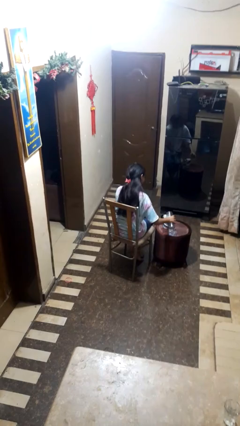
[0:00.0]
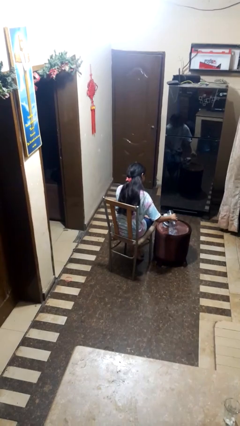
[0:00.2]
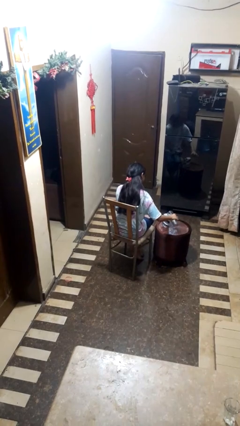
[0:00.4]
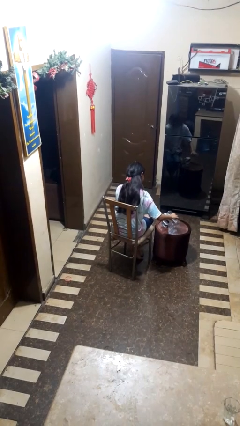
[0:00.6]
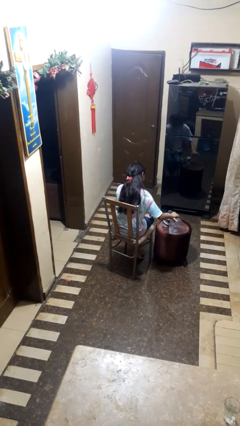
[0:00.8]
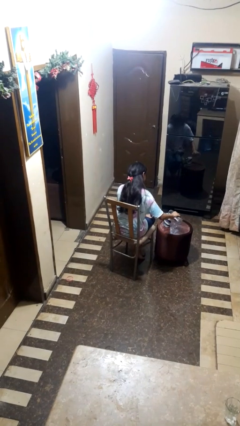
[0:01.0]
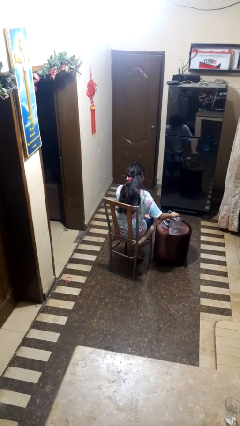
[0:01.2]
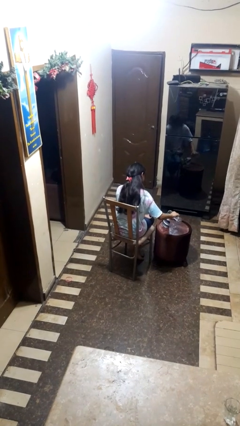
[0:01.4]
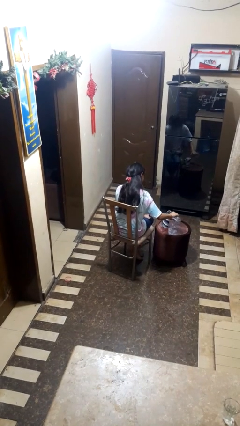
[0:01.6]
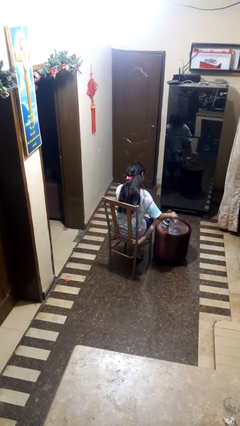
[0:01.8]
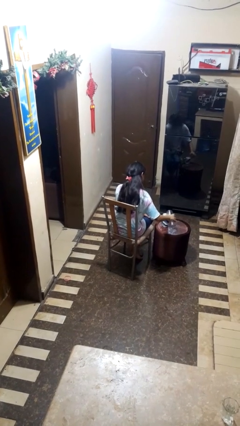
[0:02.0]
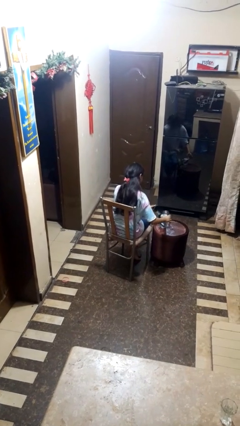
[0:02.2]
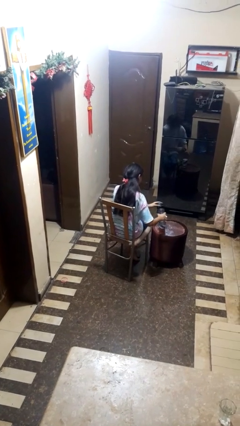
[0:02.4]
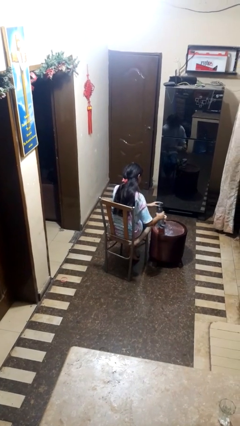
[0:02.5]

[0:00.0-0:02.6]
person pours liquid into cup

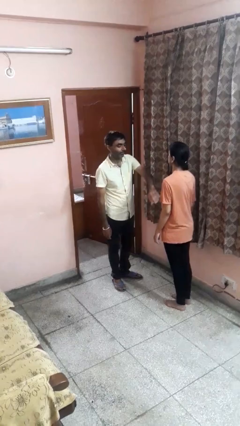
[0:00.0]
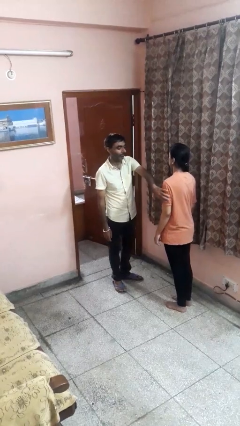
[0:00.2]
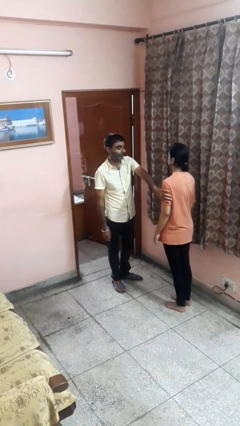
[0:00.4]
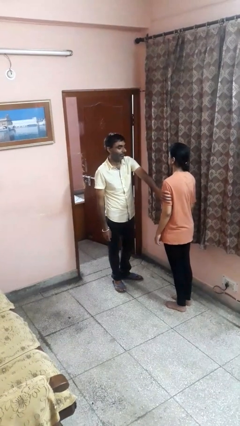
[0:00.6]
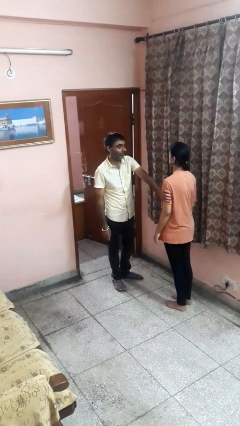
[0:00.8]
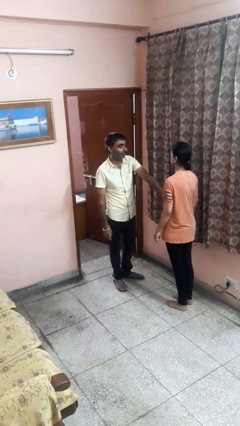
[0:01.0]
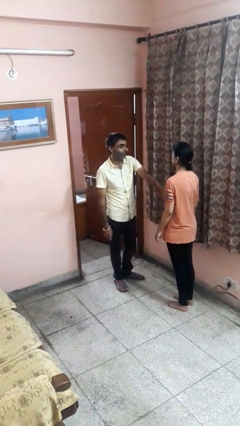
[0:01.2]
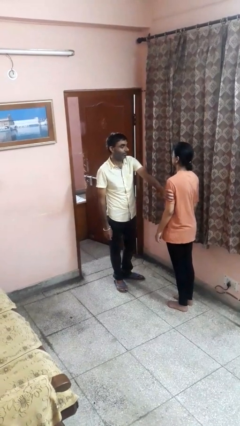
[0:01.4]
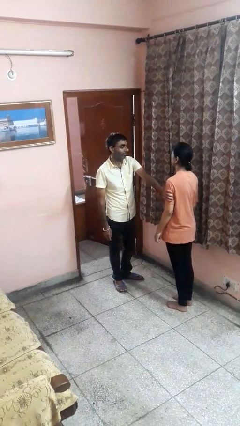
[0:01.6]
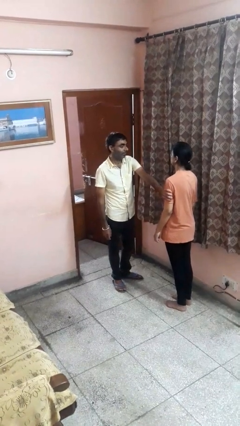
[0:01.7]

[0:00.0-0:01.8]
person grabs person by bicep

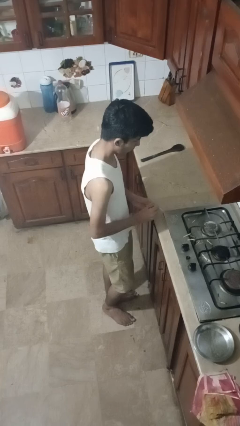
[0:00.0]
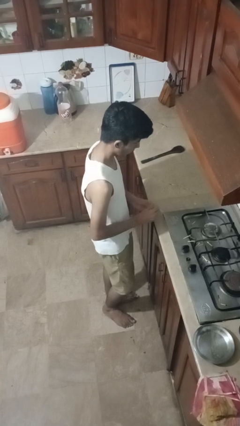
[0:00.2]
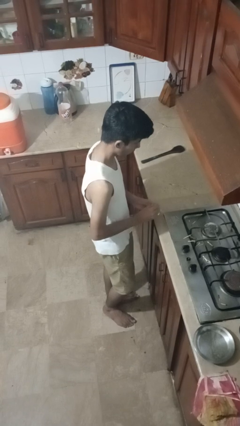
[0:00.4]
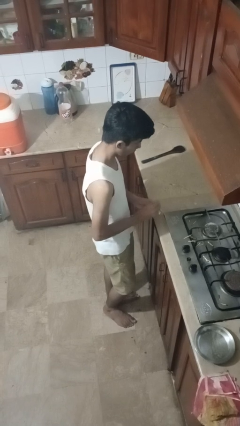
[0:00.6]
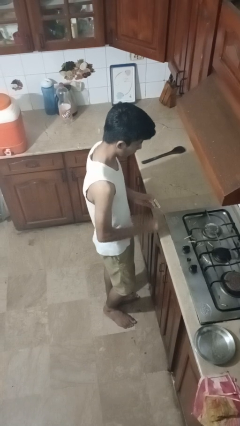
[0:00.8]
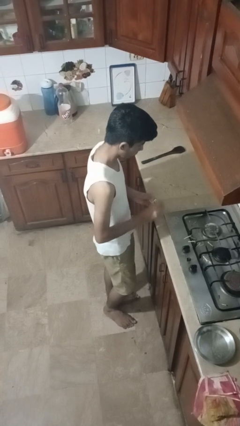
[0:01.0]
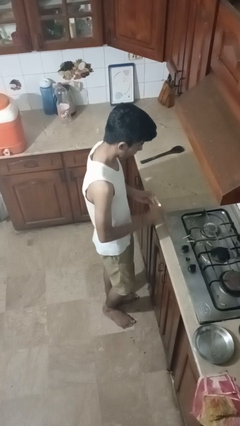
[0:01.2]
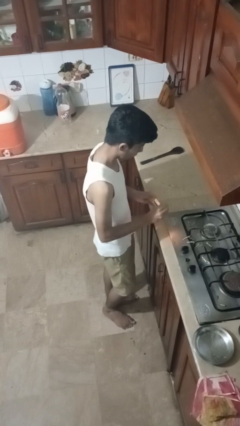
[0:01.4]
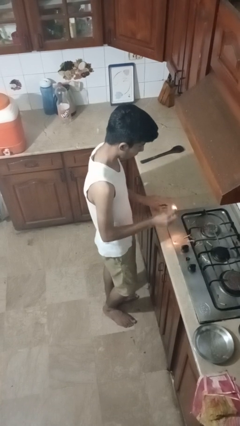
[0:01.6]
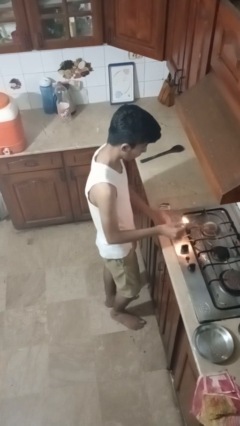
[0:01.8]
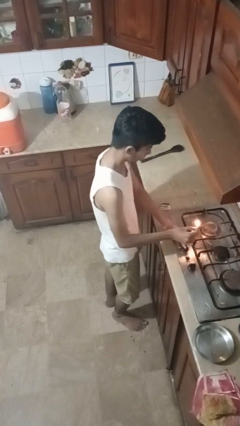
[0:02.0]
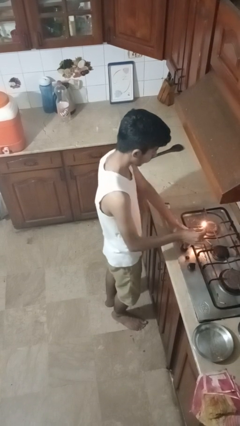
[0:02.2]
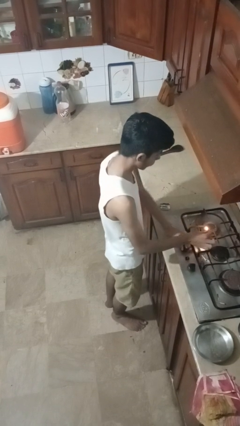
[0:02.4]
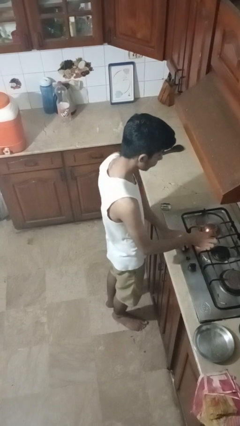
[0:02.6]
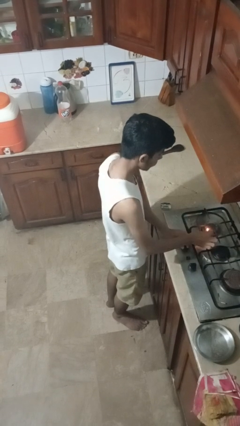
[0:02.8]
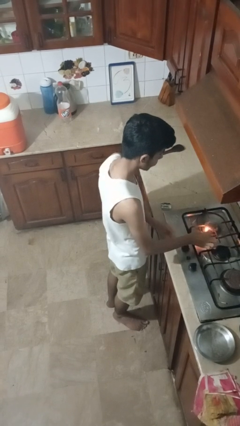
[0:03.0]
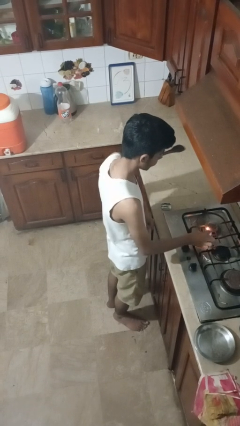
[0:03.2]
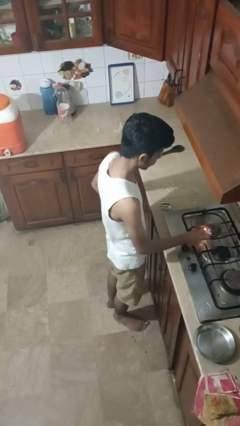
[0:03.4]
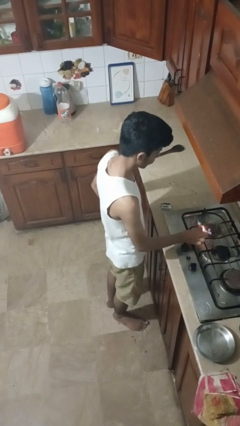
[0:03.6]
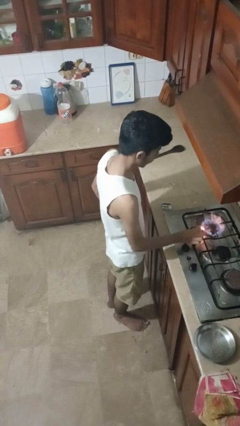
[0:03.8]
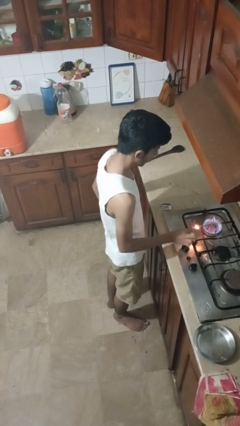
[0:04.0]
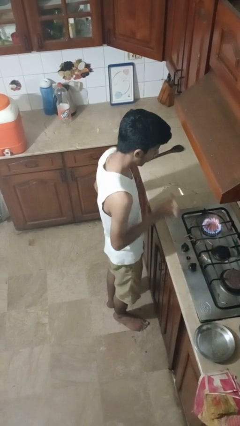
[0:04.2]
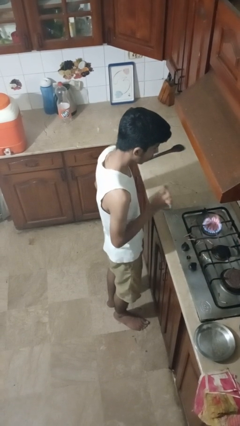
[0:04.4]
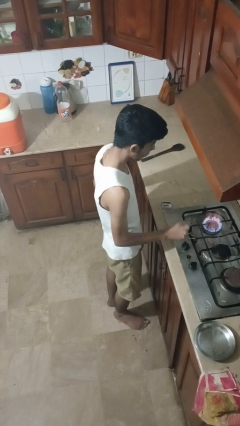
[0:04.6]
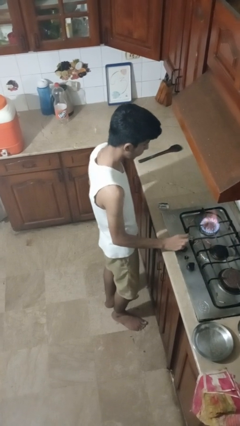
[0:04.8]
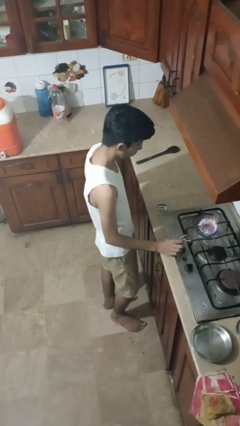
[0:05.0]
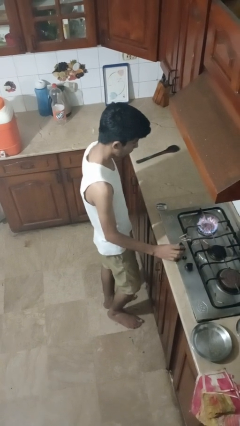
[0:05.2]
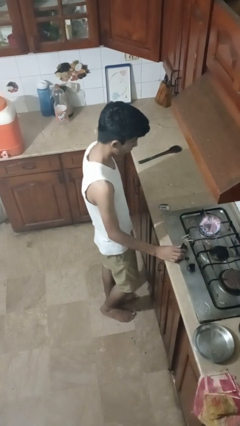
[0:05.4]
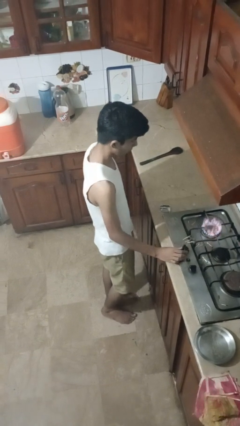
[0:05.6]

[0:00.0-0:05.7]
person turns on stovetop

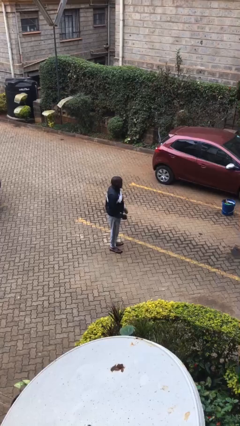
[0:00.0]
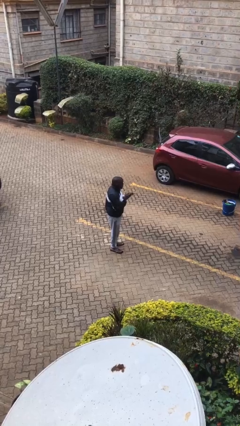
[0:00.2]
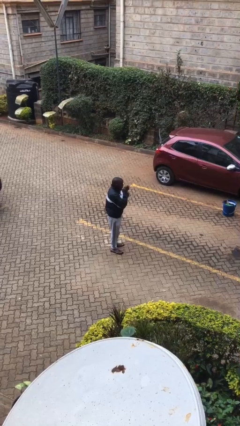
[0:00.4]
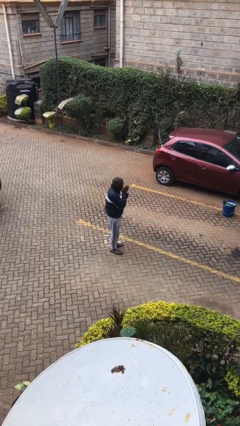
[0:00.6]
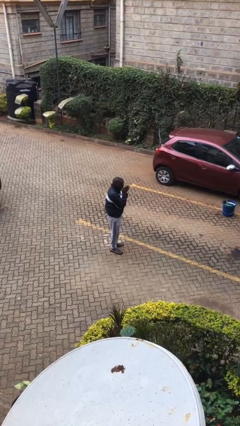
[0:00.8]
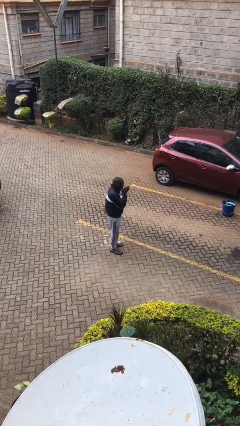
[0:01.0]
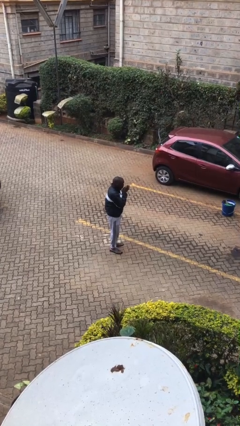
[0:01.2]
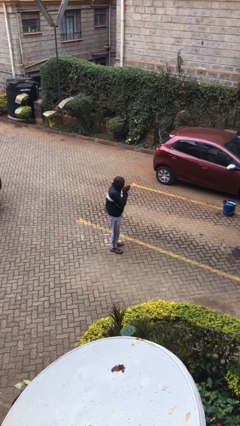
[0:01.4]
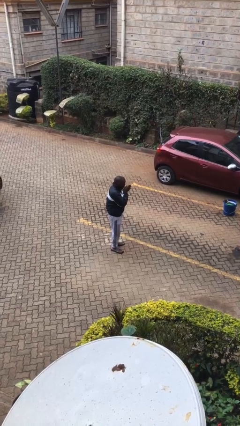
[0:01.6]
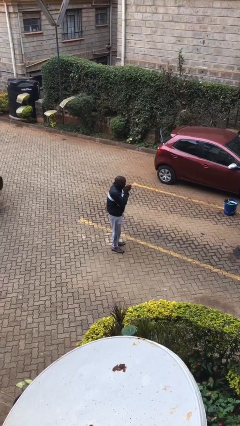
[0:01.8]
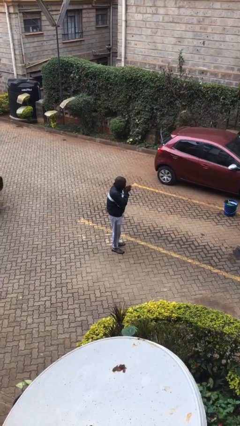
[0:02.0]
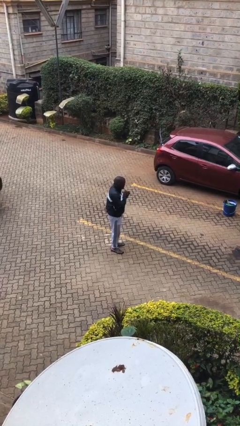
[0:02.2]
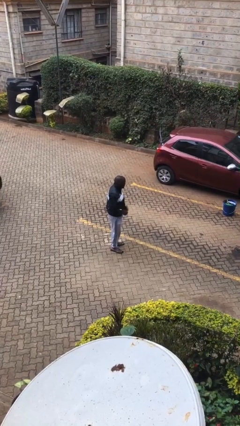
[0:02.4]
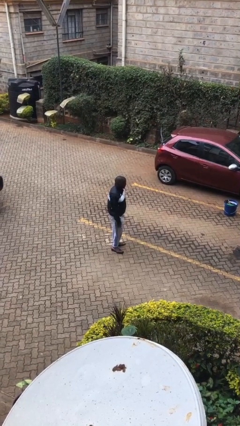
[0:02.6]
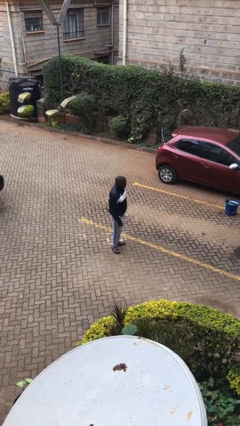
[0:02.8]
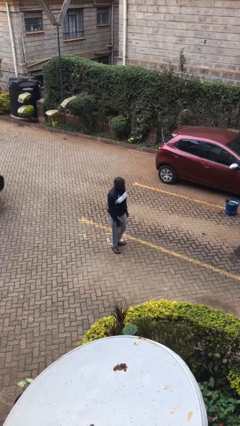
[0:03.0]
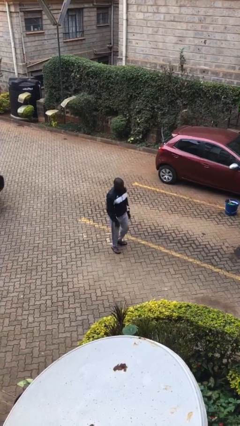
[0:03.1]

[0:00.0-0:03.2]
person blows into hands

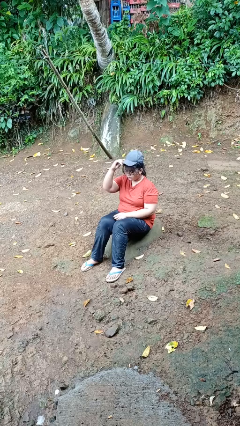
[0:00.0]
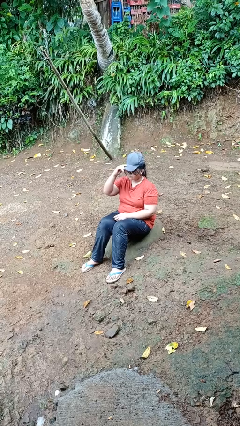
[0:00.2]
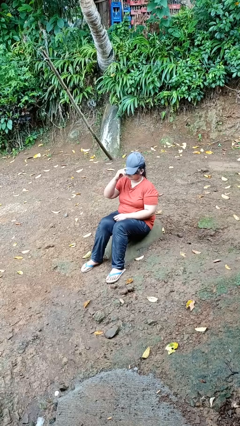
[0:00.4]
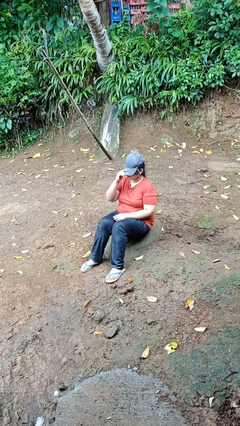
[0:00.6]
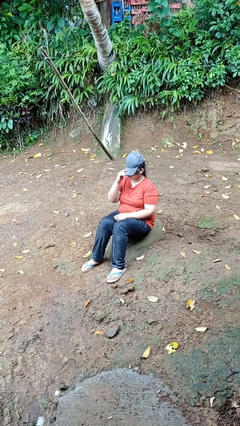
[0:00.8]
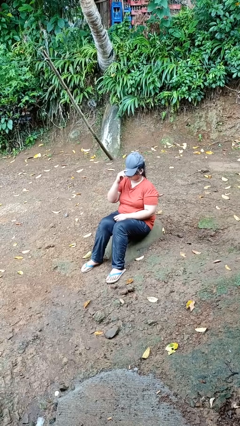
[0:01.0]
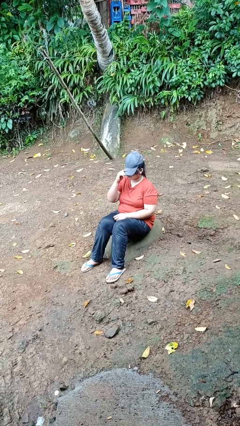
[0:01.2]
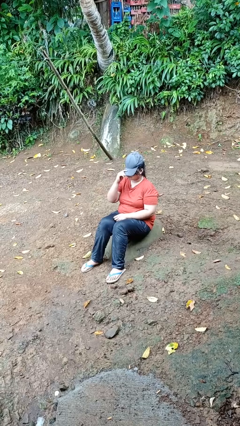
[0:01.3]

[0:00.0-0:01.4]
person puts on hat

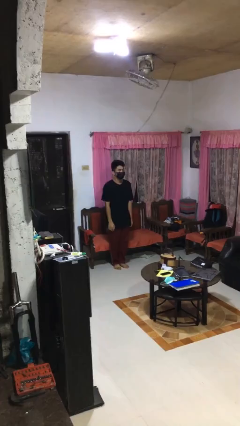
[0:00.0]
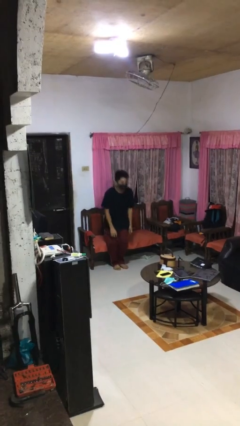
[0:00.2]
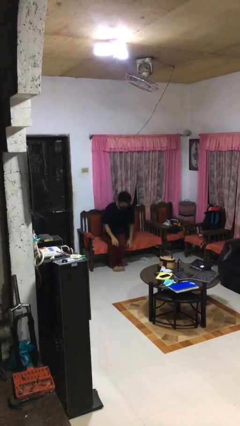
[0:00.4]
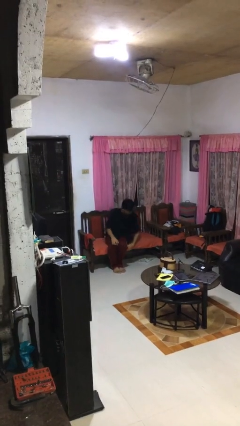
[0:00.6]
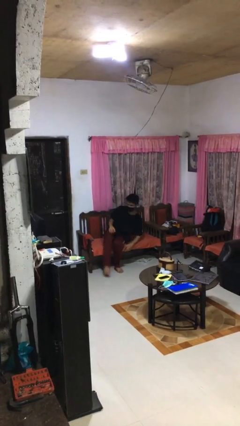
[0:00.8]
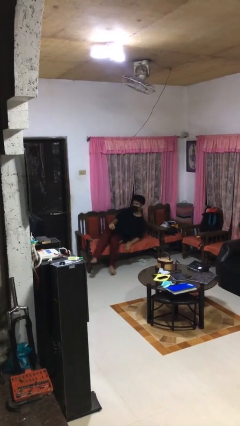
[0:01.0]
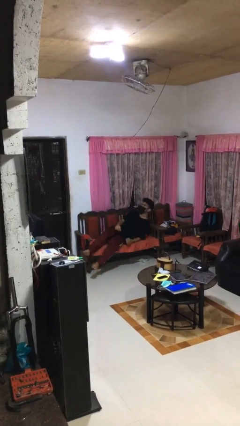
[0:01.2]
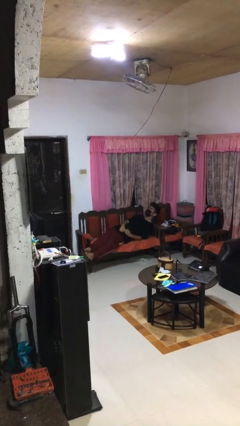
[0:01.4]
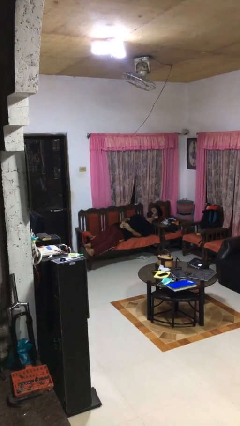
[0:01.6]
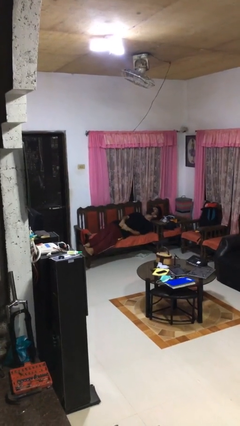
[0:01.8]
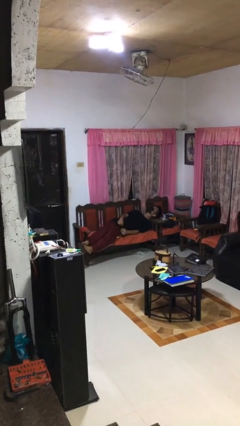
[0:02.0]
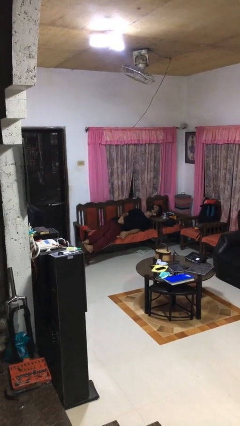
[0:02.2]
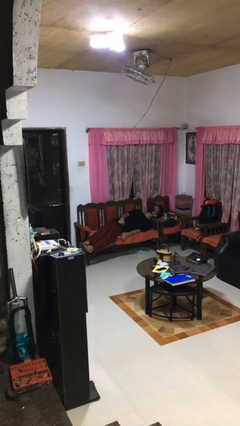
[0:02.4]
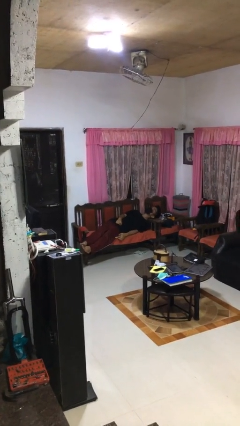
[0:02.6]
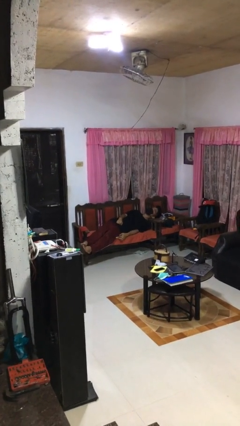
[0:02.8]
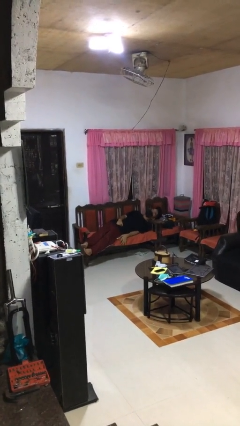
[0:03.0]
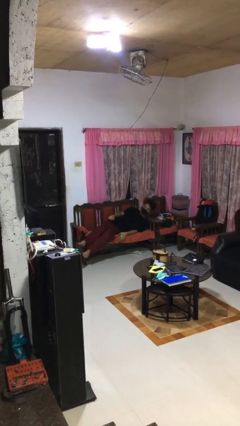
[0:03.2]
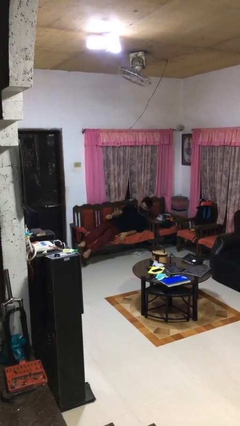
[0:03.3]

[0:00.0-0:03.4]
person lies down on couch
